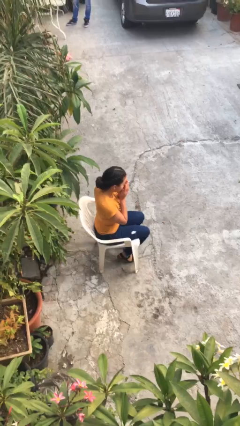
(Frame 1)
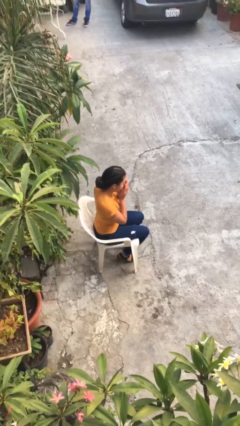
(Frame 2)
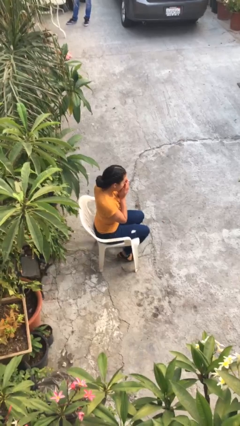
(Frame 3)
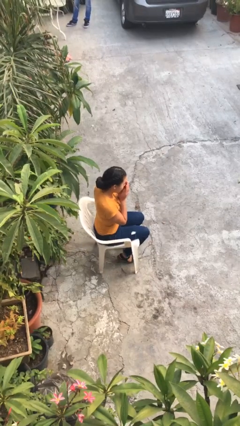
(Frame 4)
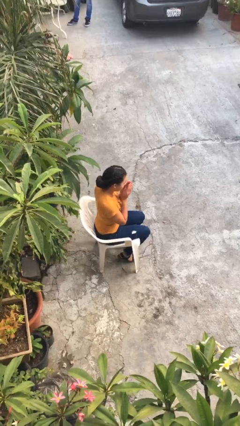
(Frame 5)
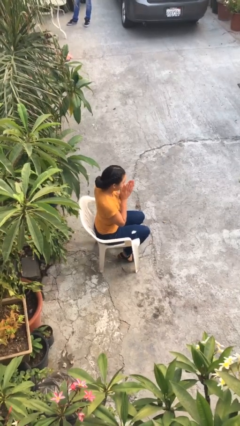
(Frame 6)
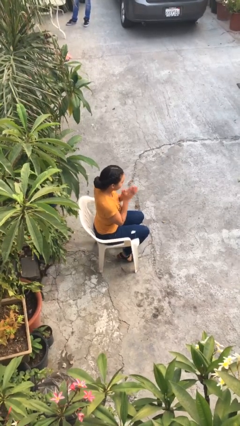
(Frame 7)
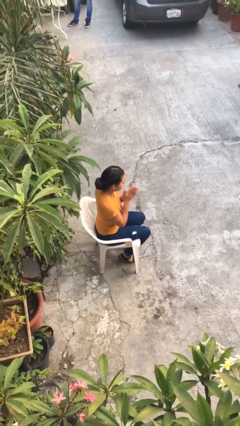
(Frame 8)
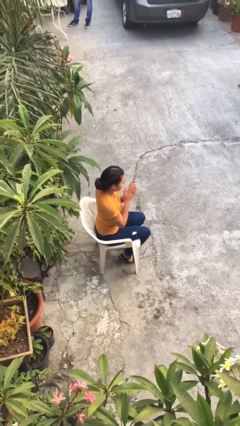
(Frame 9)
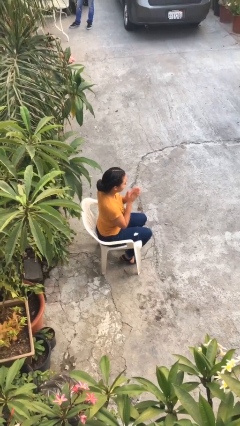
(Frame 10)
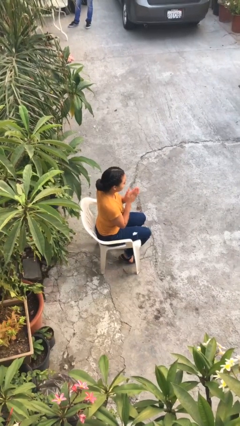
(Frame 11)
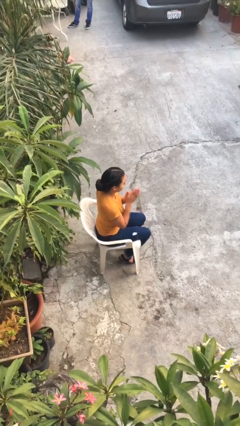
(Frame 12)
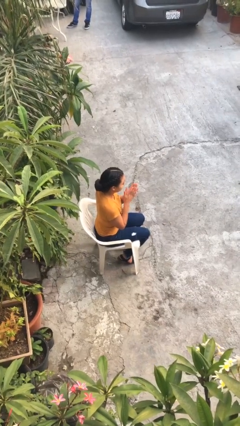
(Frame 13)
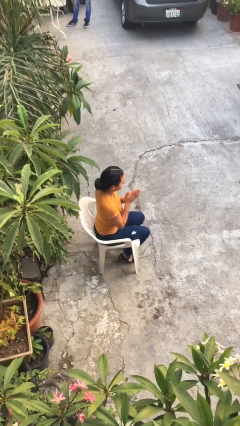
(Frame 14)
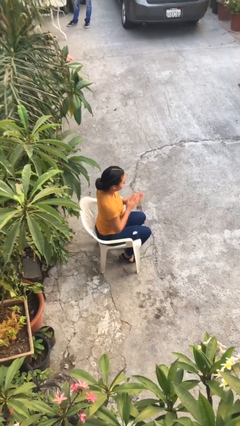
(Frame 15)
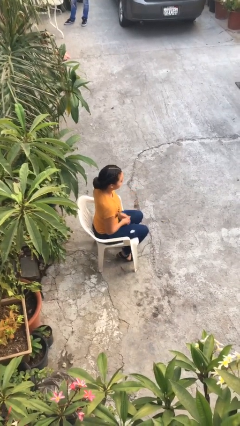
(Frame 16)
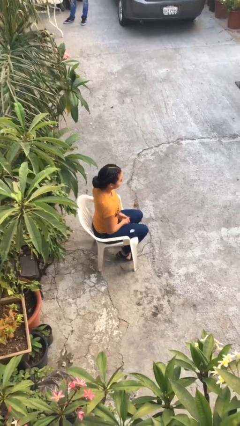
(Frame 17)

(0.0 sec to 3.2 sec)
person blows into hands

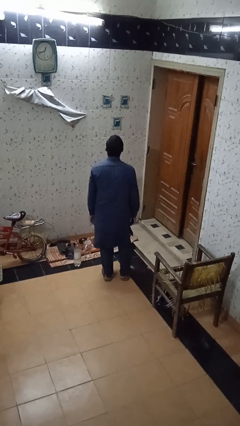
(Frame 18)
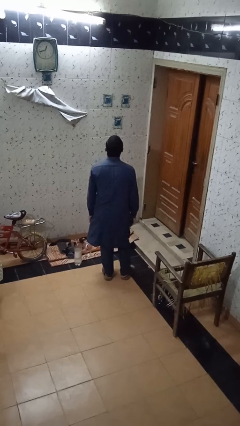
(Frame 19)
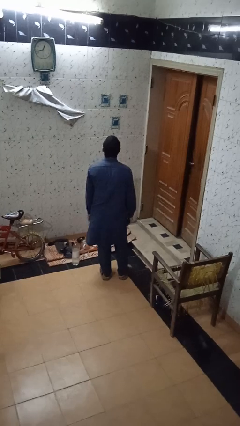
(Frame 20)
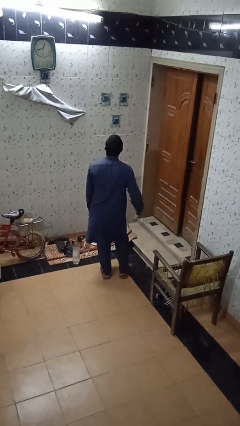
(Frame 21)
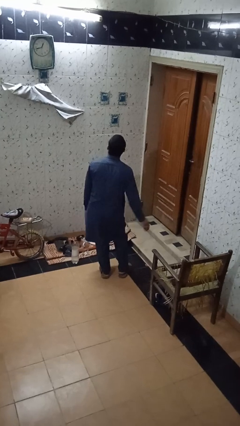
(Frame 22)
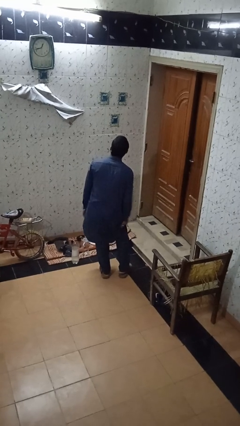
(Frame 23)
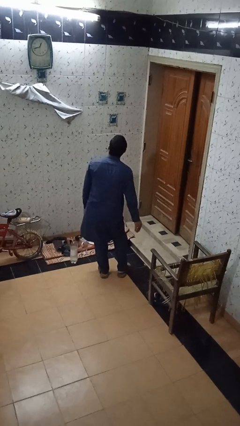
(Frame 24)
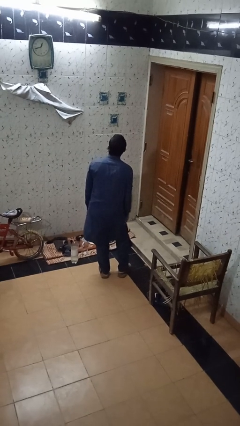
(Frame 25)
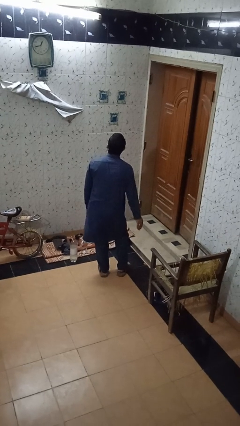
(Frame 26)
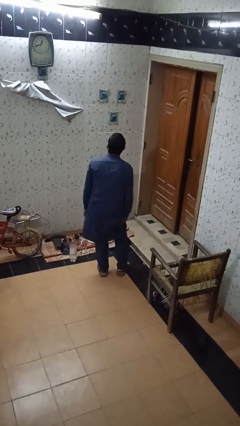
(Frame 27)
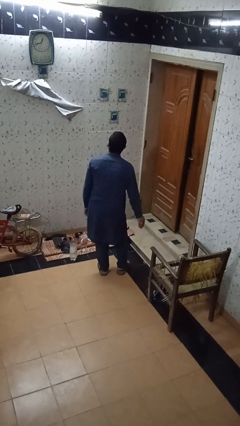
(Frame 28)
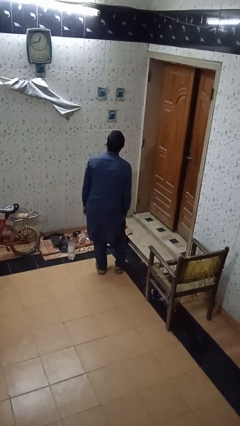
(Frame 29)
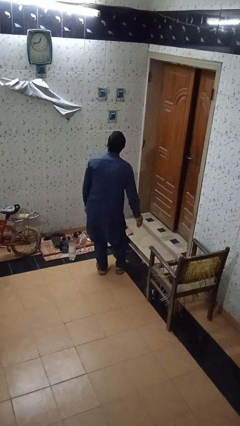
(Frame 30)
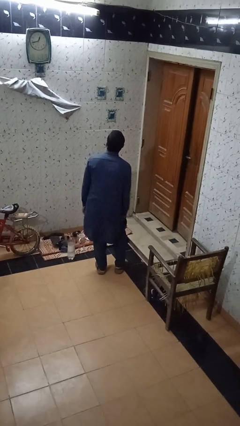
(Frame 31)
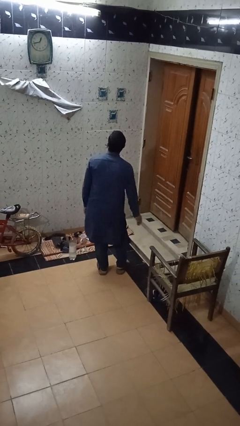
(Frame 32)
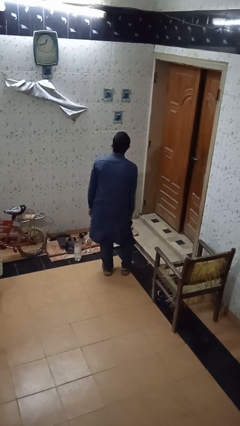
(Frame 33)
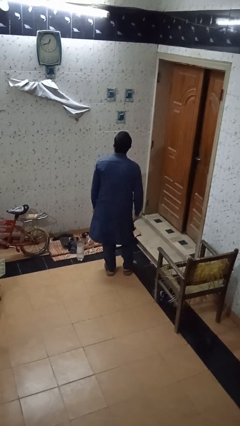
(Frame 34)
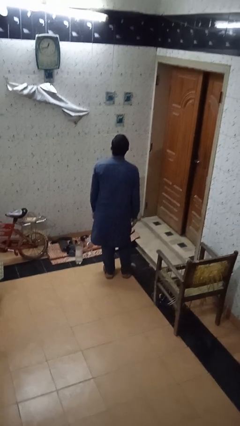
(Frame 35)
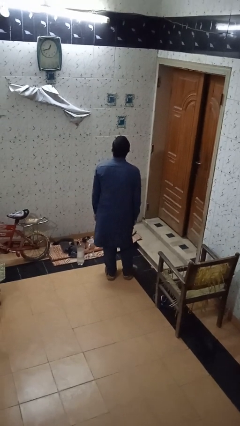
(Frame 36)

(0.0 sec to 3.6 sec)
person slaps hands on thighs

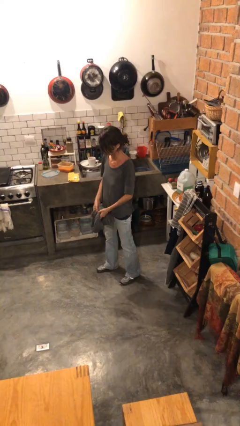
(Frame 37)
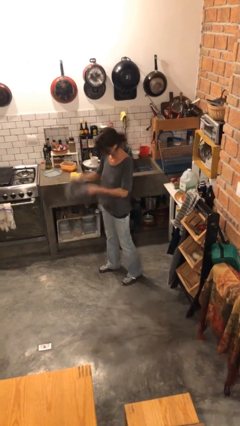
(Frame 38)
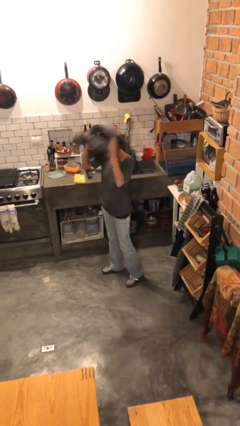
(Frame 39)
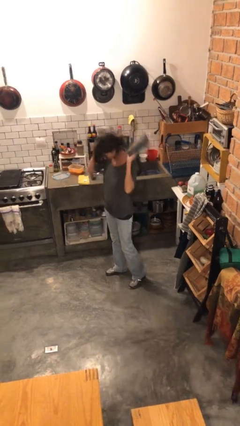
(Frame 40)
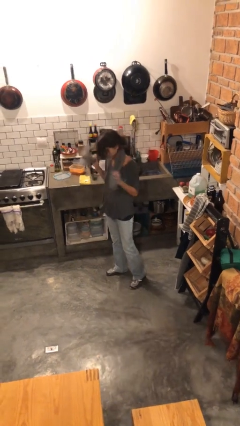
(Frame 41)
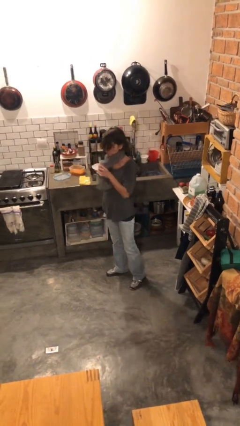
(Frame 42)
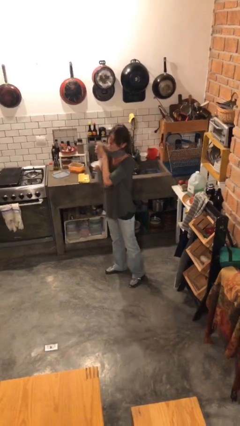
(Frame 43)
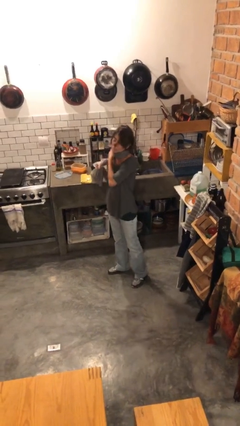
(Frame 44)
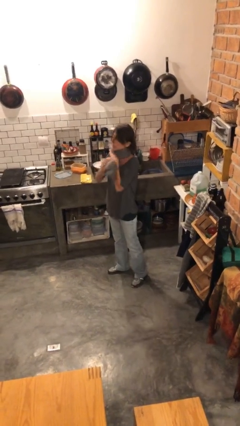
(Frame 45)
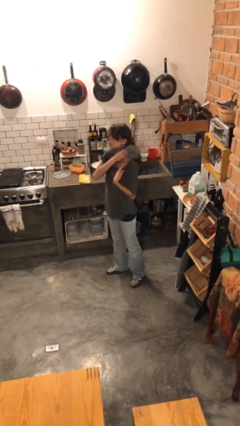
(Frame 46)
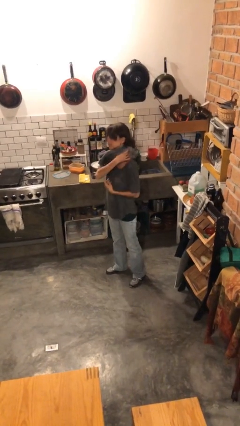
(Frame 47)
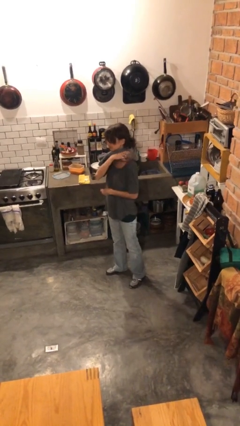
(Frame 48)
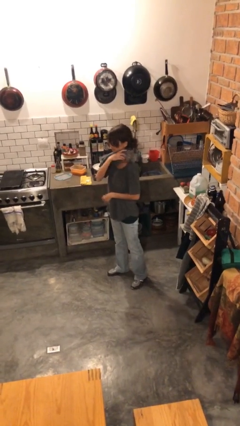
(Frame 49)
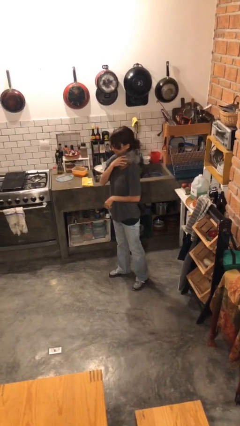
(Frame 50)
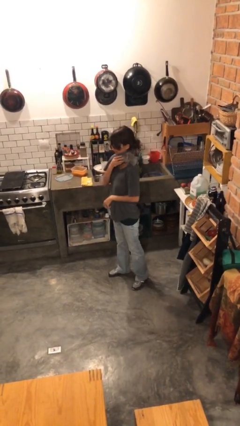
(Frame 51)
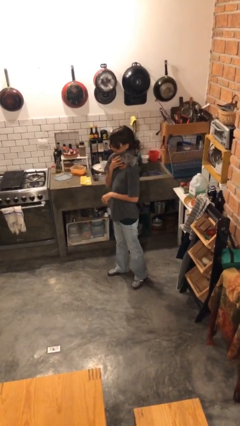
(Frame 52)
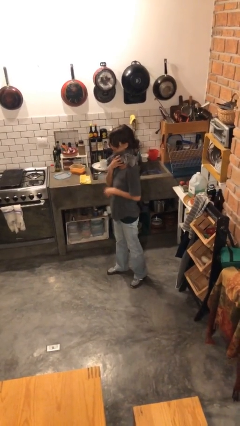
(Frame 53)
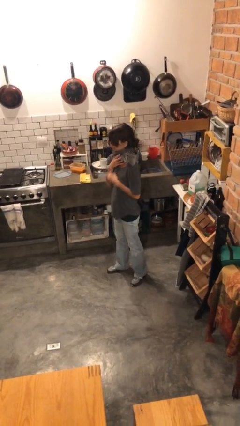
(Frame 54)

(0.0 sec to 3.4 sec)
person puts on scarf

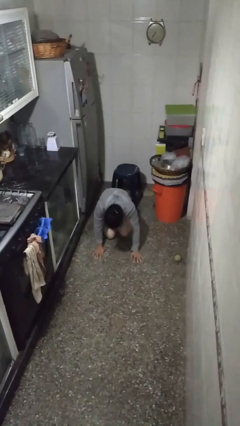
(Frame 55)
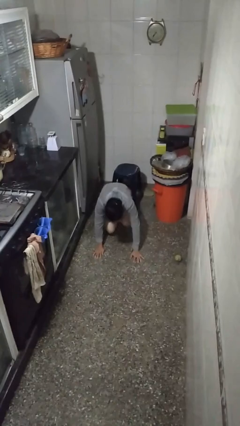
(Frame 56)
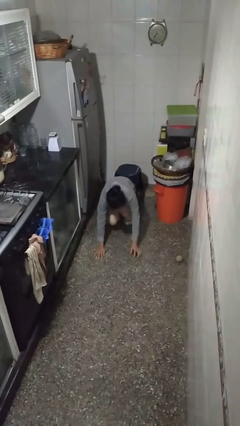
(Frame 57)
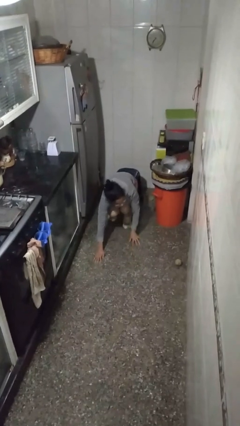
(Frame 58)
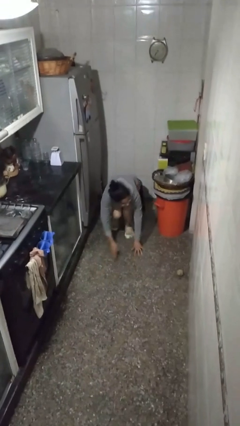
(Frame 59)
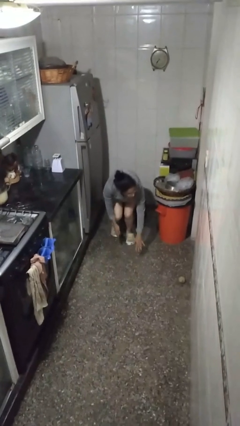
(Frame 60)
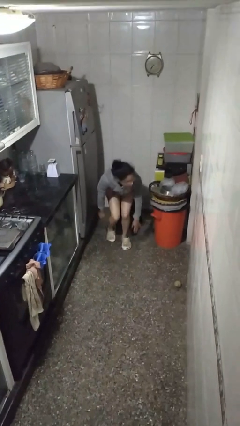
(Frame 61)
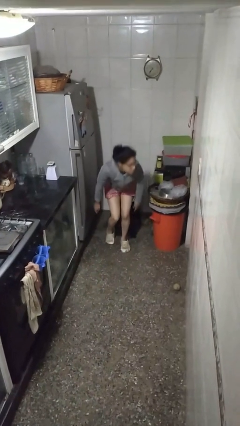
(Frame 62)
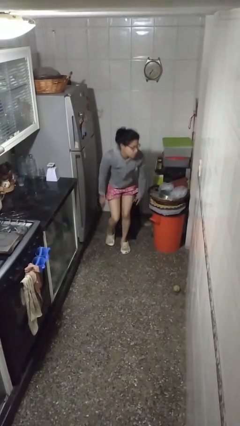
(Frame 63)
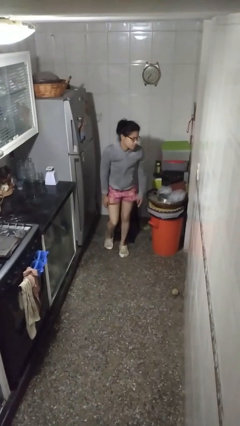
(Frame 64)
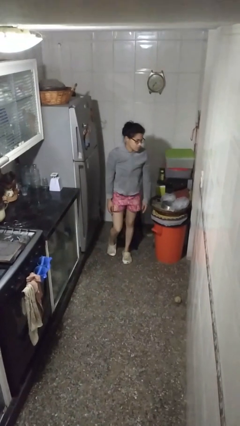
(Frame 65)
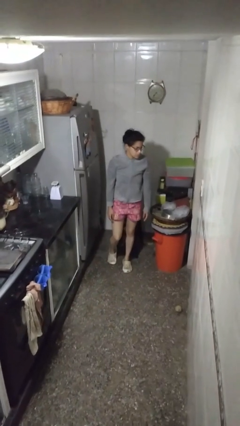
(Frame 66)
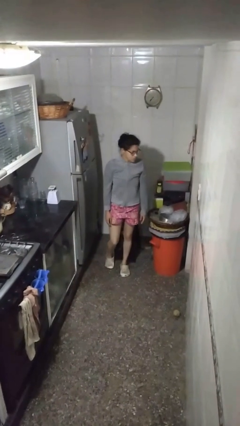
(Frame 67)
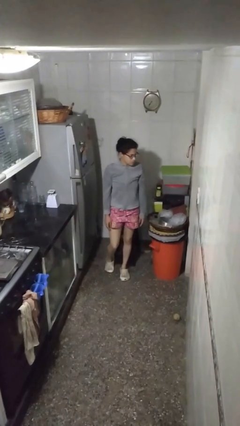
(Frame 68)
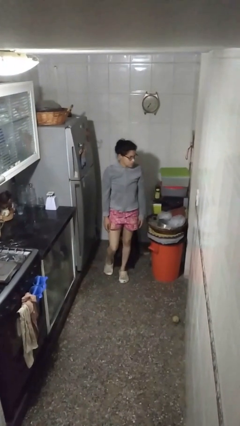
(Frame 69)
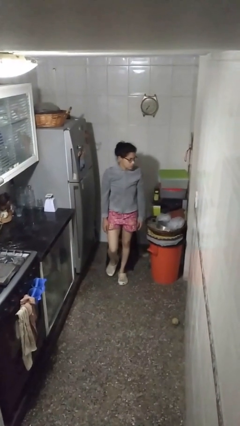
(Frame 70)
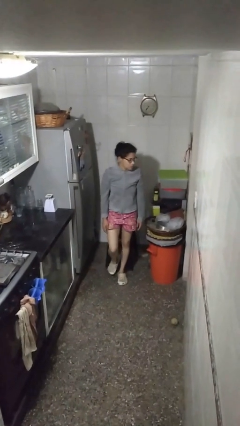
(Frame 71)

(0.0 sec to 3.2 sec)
person stands up from floor

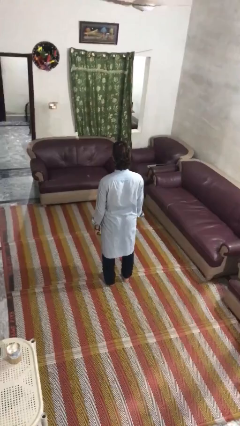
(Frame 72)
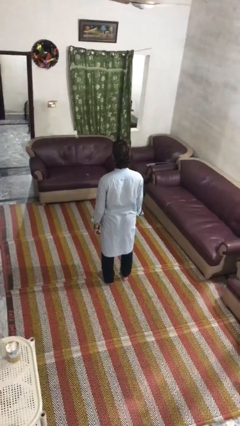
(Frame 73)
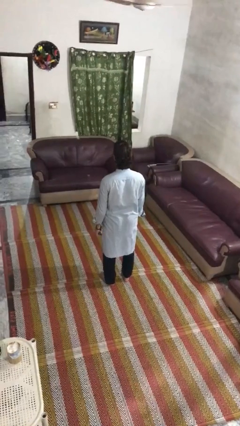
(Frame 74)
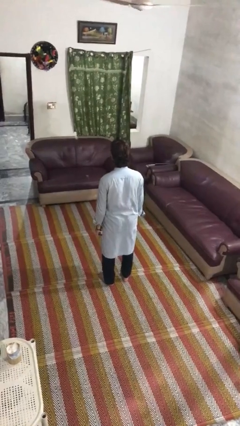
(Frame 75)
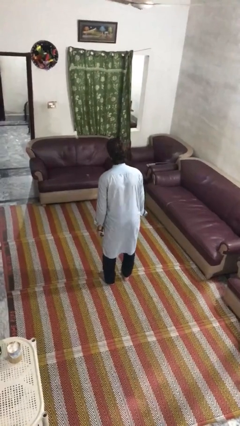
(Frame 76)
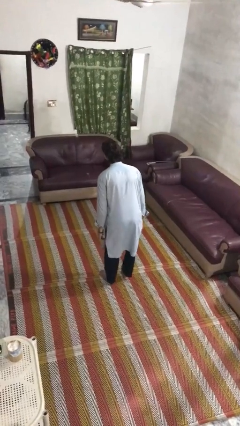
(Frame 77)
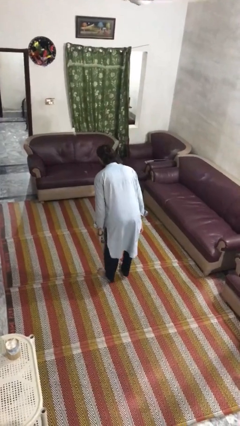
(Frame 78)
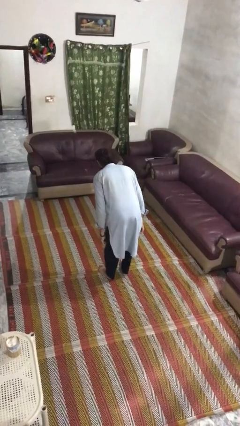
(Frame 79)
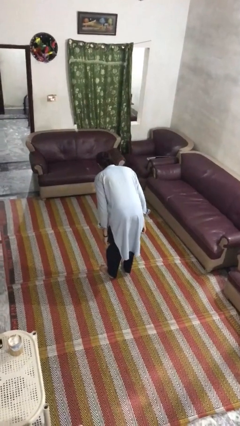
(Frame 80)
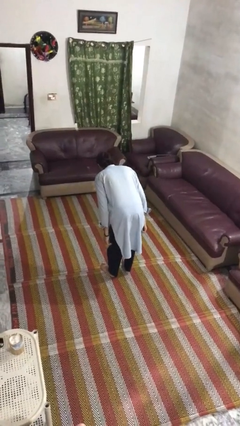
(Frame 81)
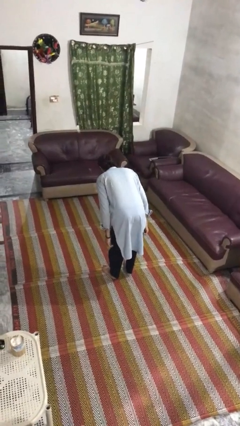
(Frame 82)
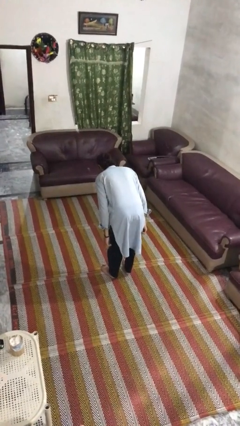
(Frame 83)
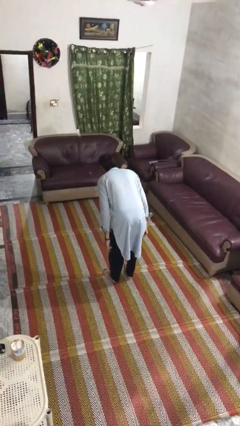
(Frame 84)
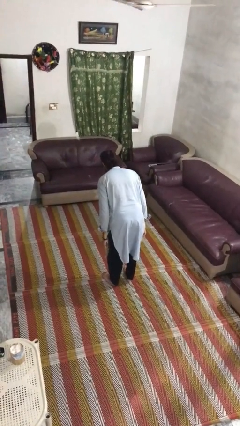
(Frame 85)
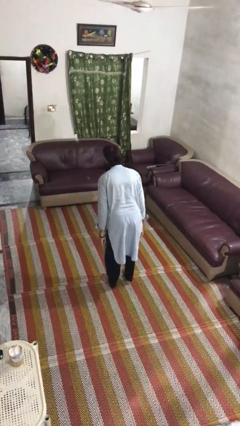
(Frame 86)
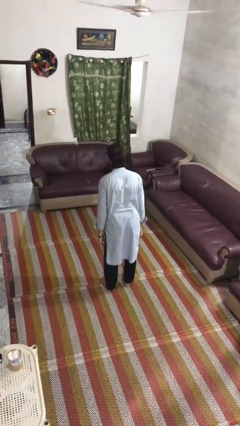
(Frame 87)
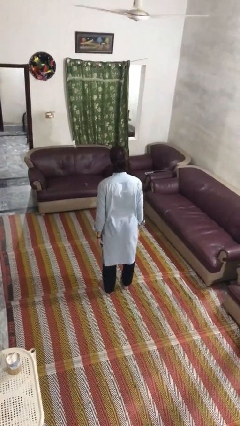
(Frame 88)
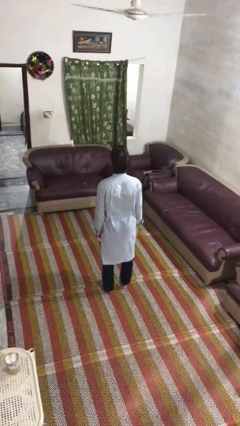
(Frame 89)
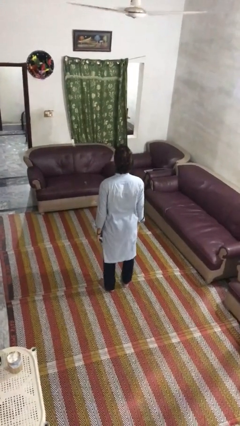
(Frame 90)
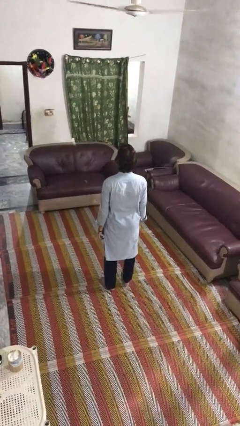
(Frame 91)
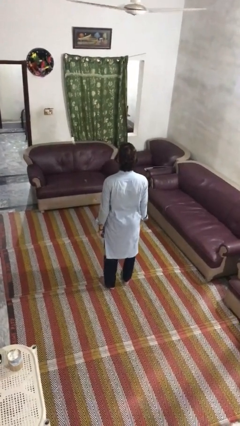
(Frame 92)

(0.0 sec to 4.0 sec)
person bows

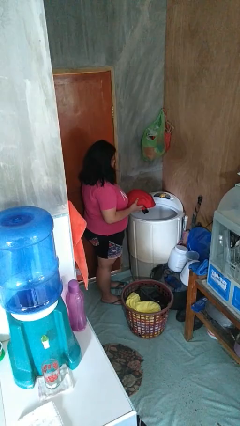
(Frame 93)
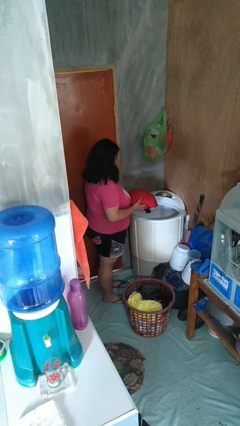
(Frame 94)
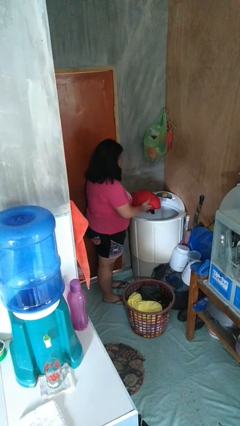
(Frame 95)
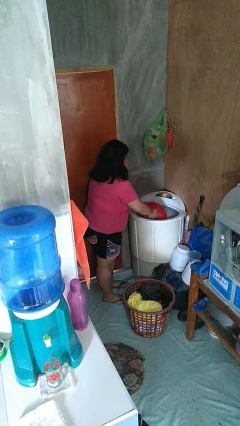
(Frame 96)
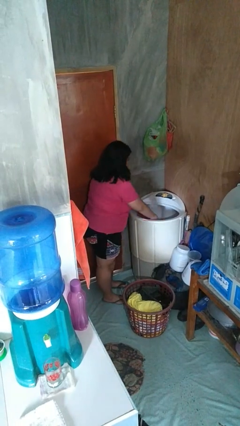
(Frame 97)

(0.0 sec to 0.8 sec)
person loads dryer
